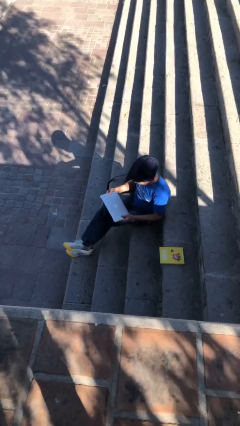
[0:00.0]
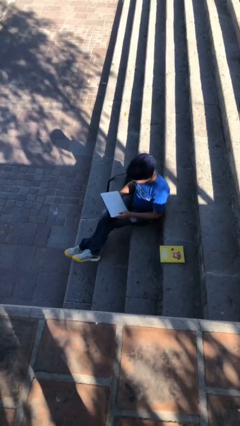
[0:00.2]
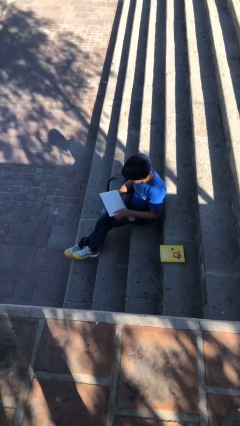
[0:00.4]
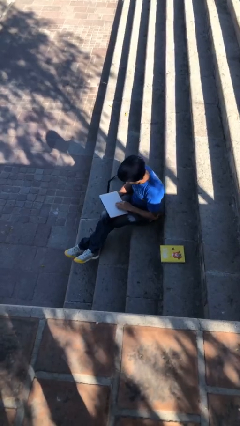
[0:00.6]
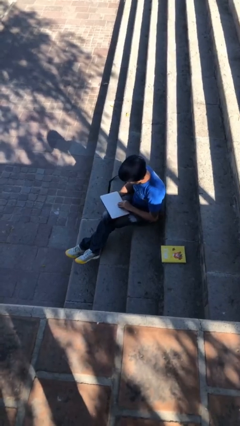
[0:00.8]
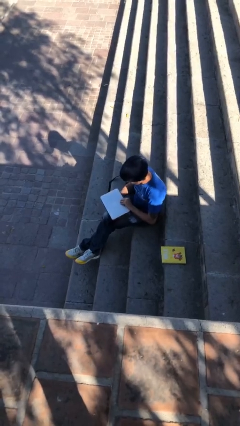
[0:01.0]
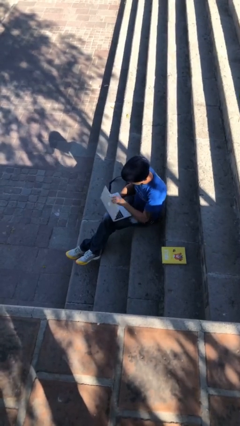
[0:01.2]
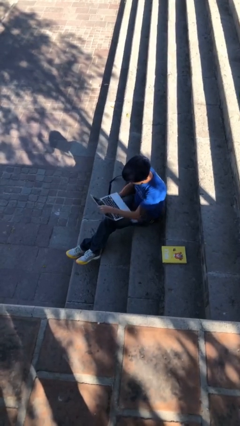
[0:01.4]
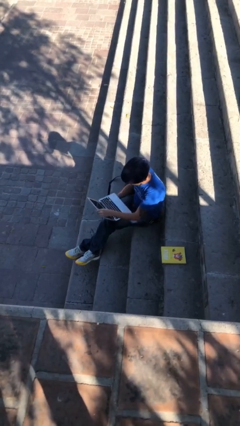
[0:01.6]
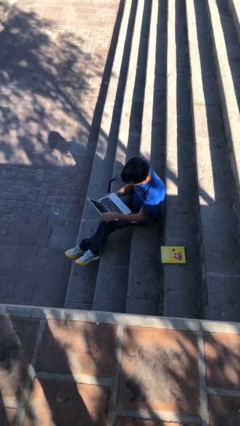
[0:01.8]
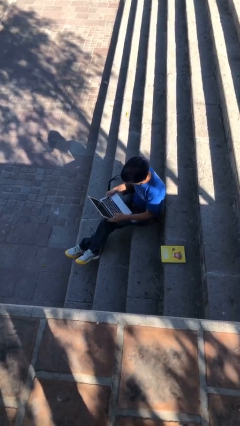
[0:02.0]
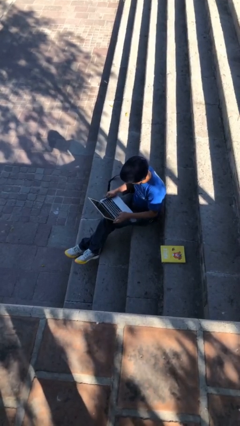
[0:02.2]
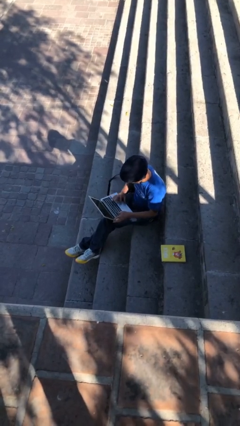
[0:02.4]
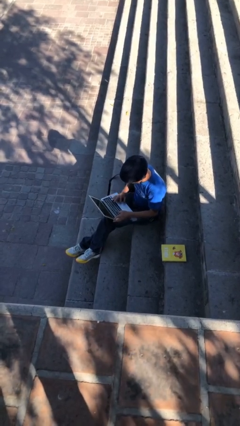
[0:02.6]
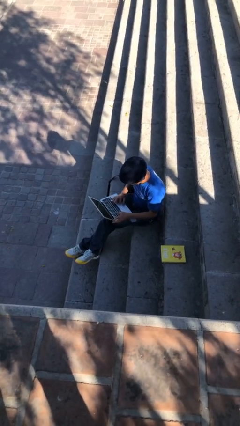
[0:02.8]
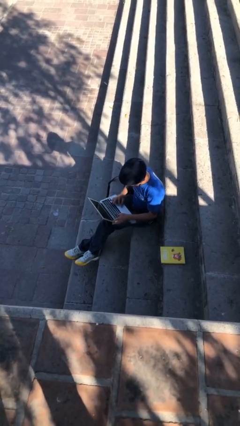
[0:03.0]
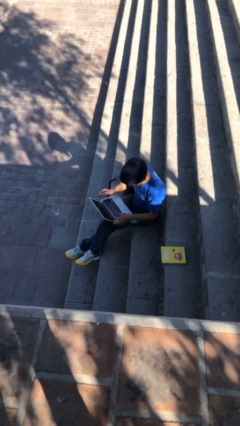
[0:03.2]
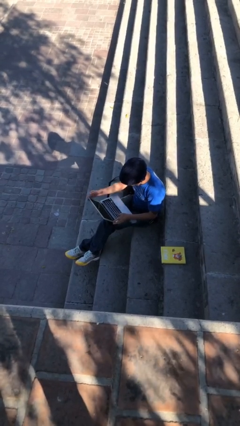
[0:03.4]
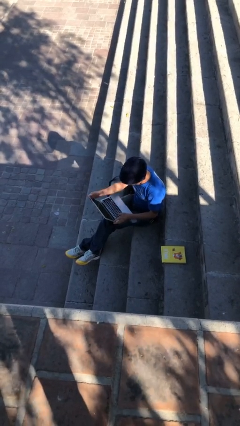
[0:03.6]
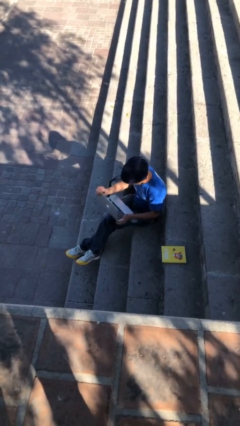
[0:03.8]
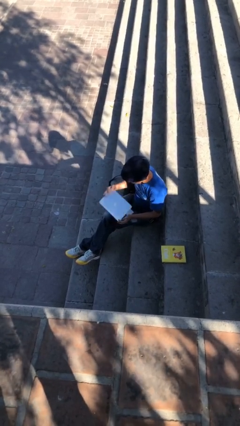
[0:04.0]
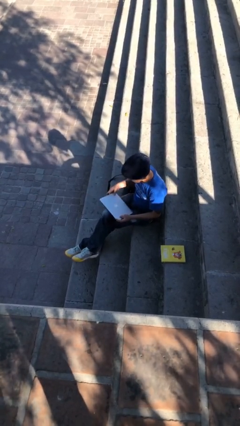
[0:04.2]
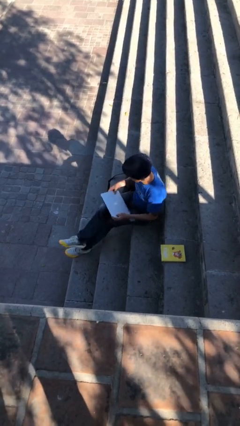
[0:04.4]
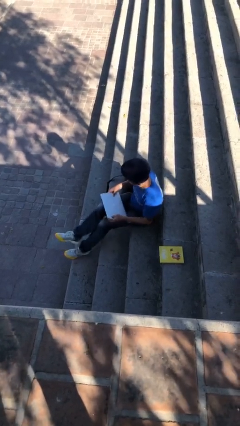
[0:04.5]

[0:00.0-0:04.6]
person interacts with laptop

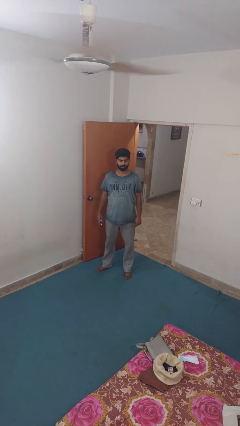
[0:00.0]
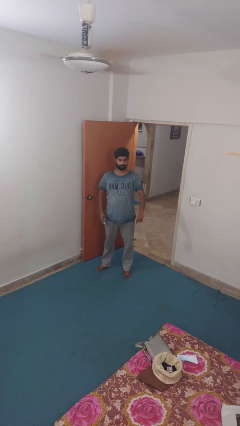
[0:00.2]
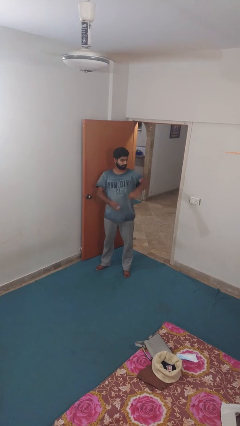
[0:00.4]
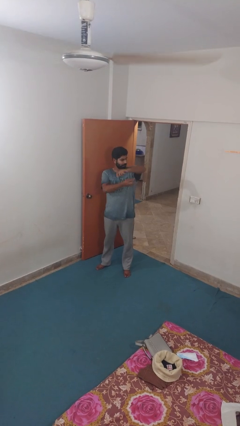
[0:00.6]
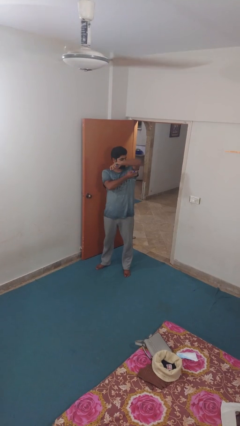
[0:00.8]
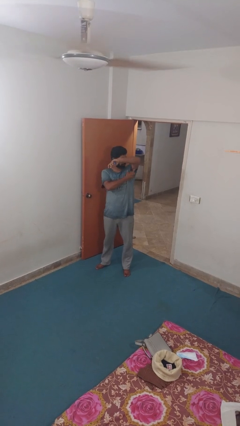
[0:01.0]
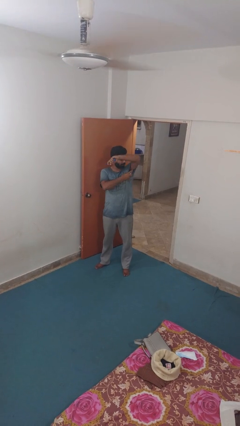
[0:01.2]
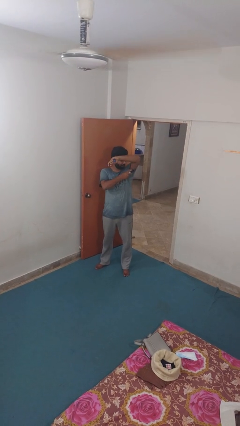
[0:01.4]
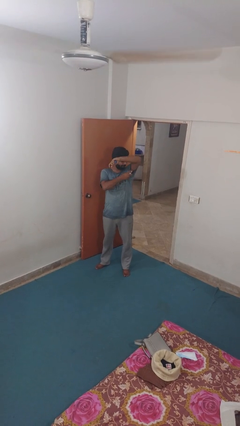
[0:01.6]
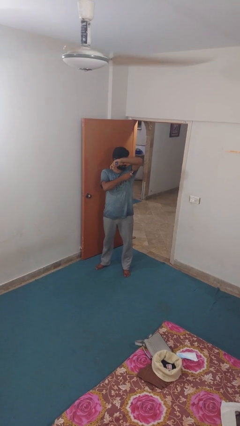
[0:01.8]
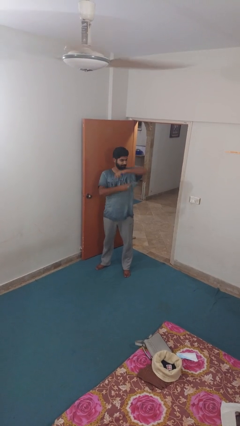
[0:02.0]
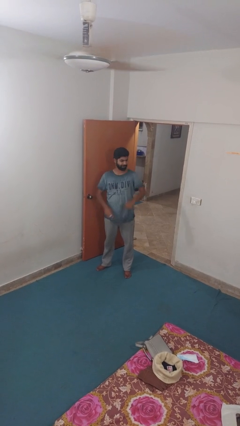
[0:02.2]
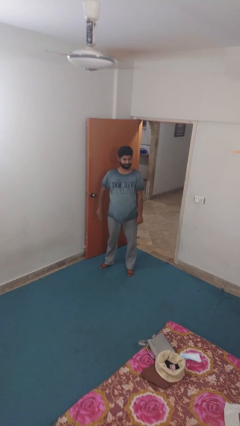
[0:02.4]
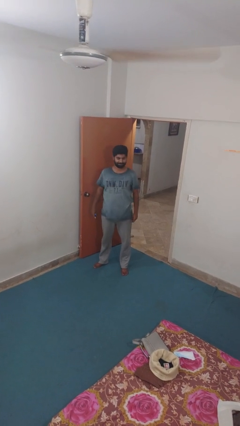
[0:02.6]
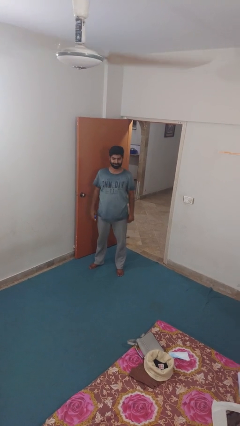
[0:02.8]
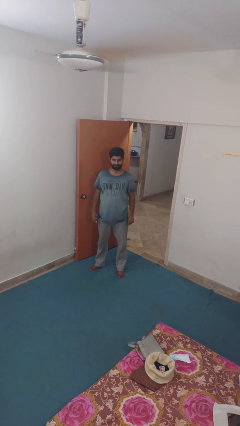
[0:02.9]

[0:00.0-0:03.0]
person applies deodorant

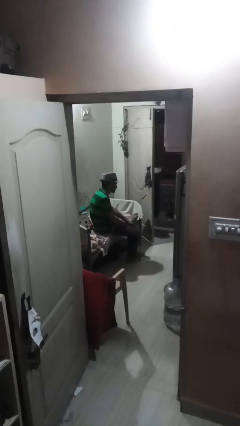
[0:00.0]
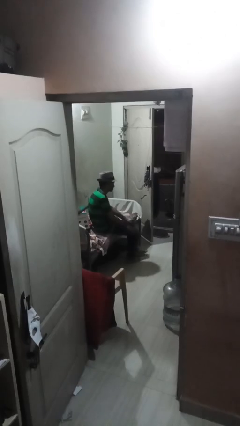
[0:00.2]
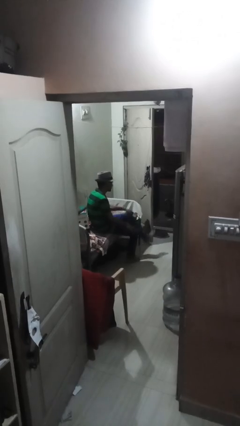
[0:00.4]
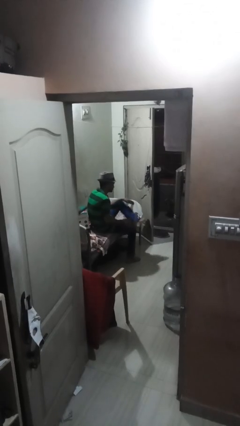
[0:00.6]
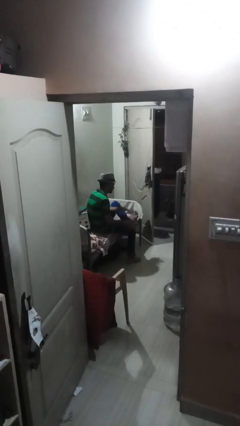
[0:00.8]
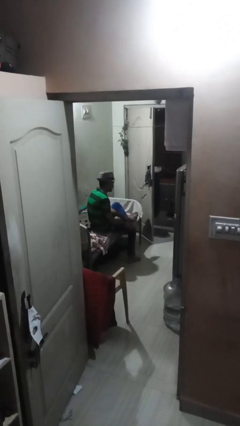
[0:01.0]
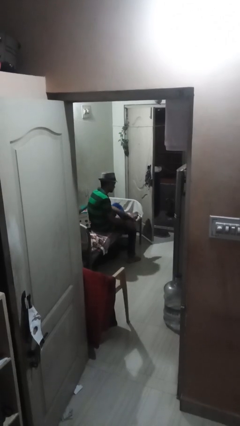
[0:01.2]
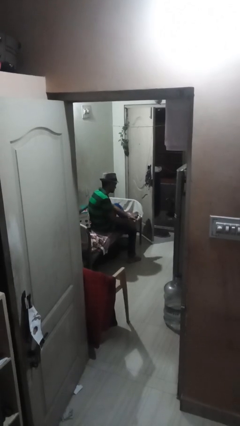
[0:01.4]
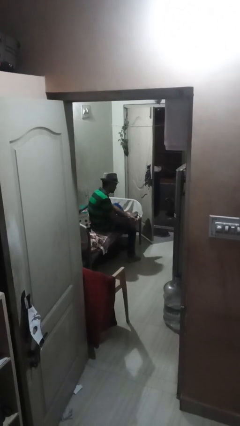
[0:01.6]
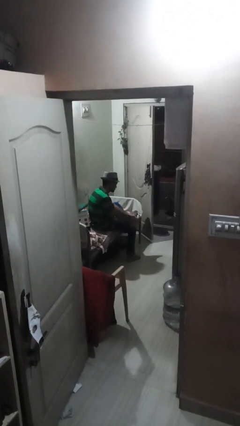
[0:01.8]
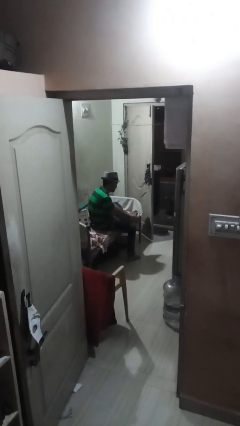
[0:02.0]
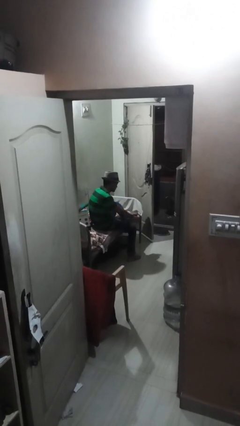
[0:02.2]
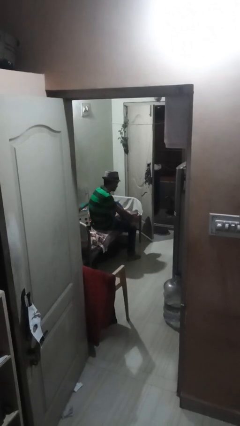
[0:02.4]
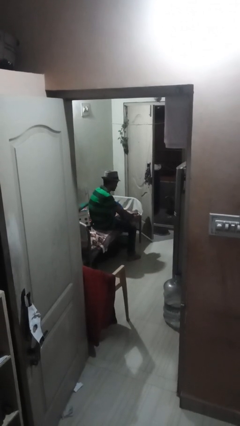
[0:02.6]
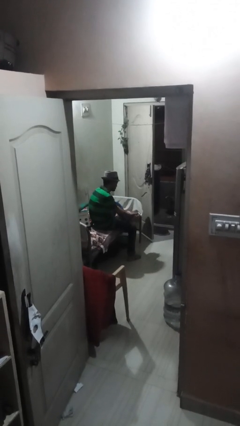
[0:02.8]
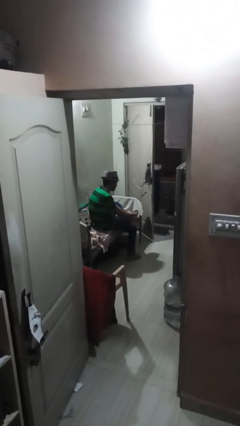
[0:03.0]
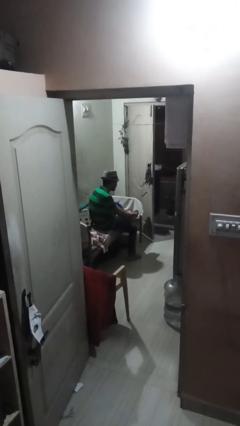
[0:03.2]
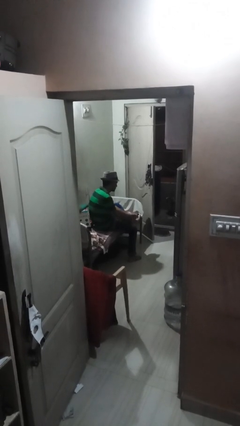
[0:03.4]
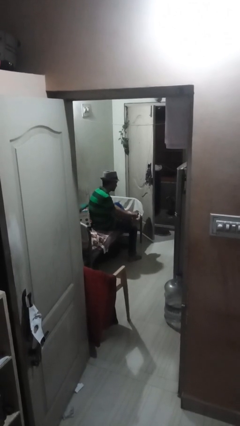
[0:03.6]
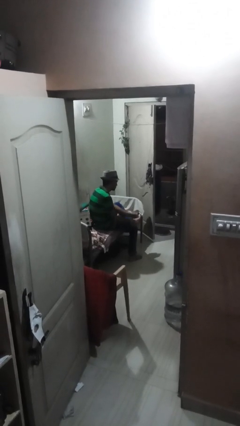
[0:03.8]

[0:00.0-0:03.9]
person rubs foot

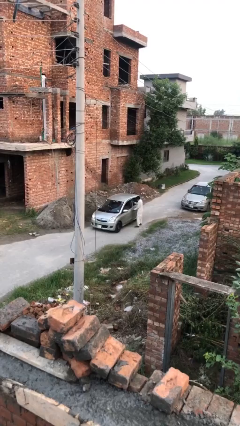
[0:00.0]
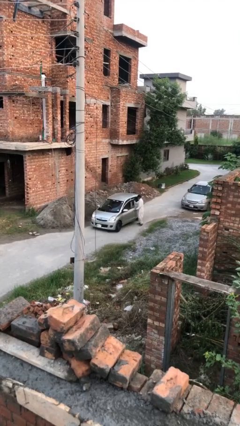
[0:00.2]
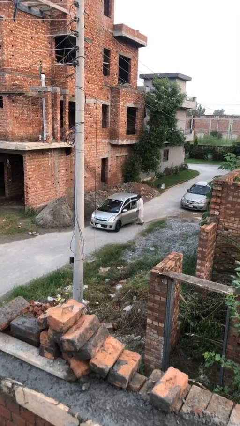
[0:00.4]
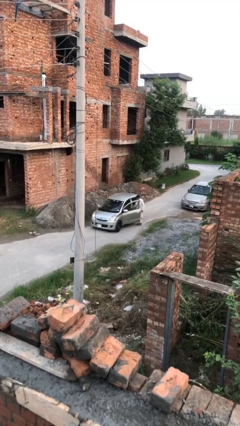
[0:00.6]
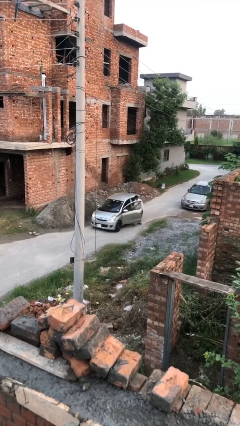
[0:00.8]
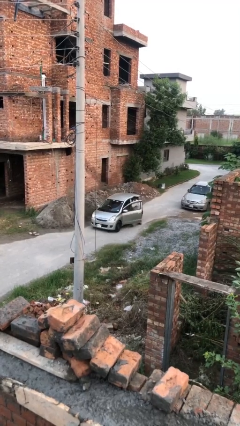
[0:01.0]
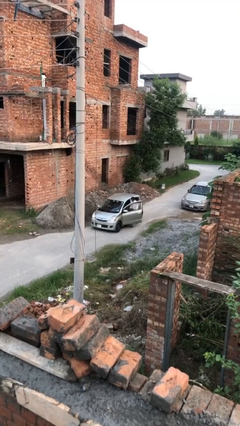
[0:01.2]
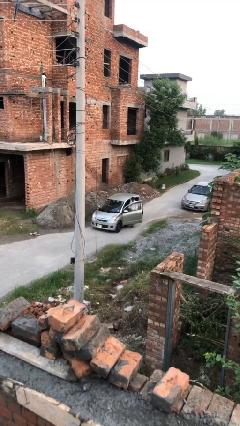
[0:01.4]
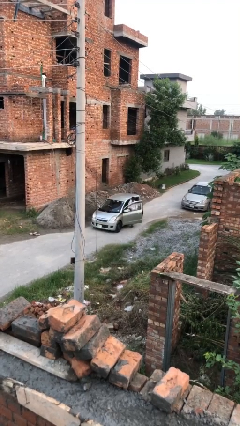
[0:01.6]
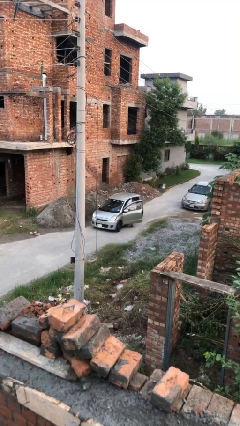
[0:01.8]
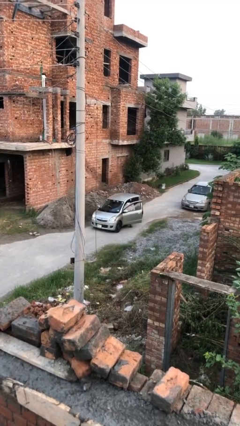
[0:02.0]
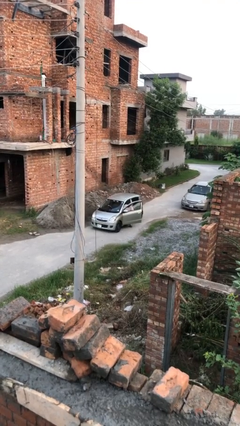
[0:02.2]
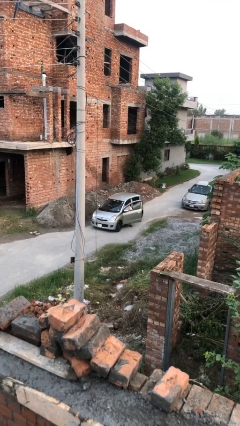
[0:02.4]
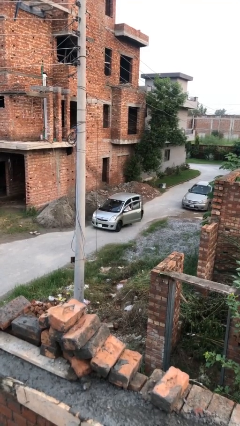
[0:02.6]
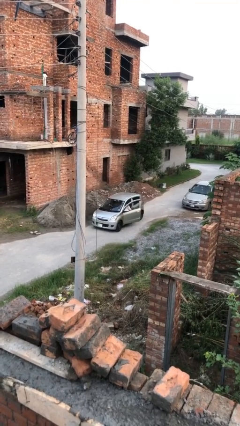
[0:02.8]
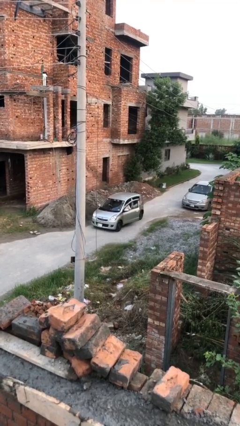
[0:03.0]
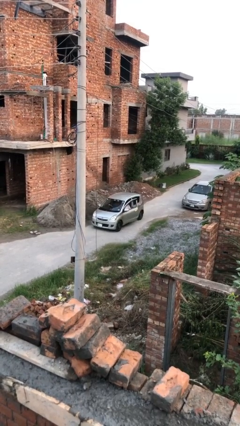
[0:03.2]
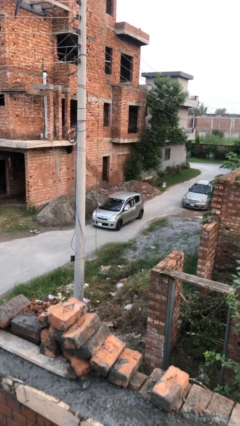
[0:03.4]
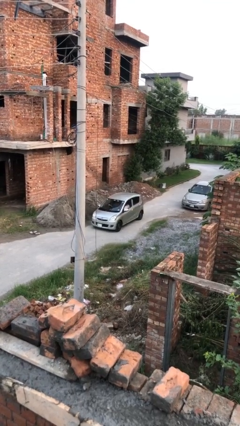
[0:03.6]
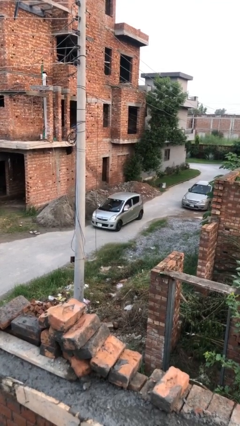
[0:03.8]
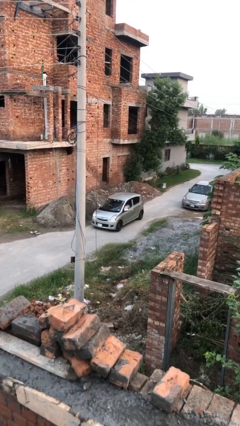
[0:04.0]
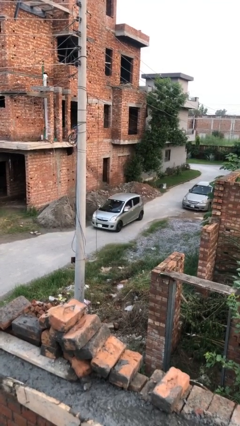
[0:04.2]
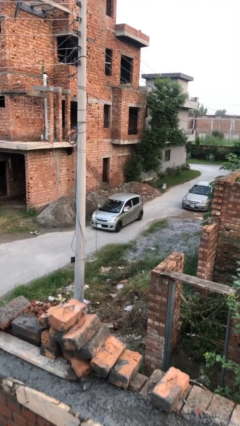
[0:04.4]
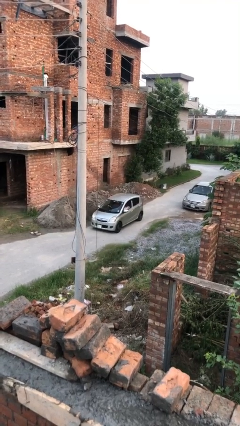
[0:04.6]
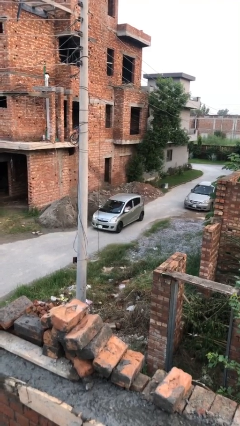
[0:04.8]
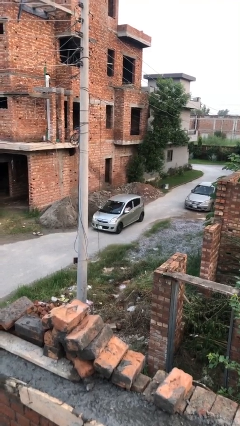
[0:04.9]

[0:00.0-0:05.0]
car picks up person

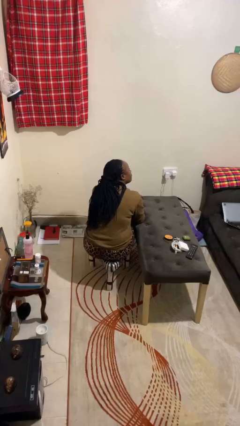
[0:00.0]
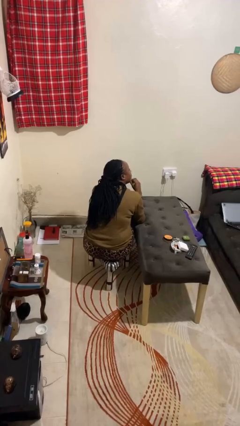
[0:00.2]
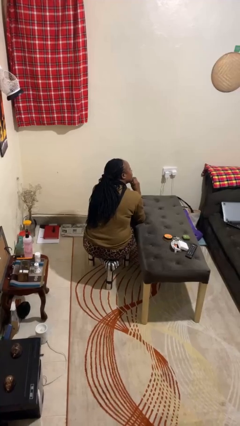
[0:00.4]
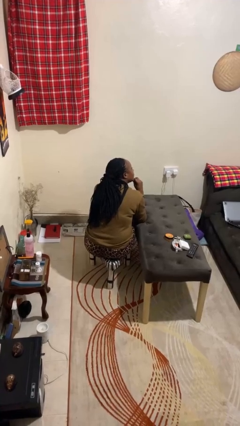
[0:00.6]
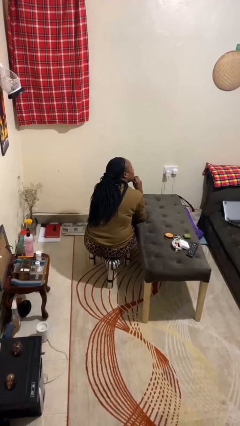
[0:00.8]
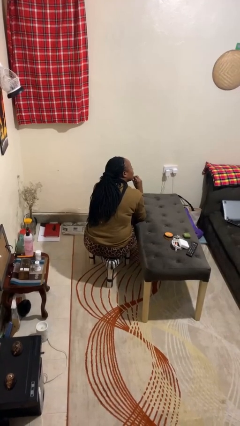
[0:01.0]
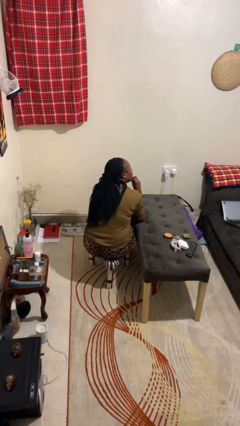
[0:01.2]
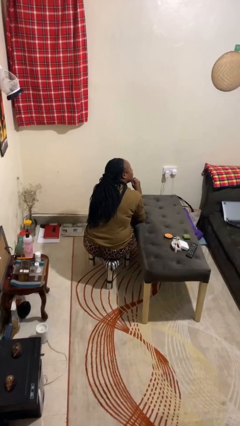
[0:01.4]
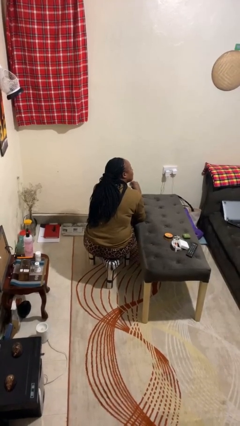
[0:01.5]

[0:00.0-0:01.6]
person strokes chin
